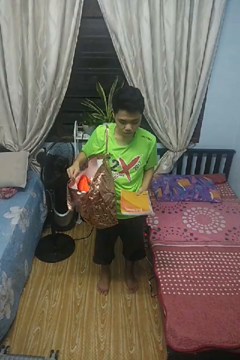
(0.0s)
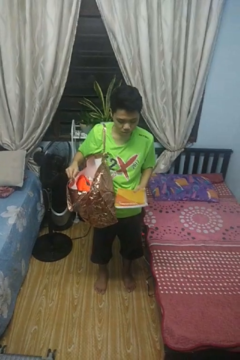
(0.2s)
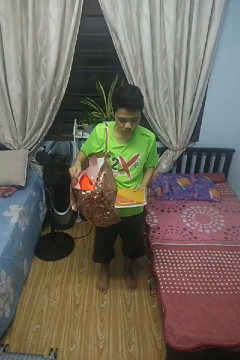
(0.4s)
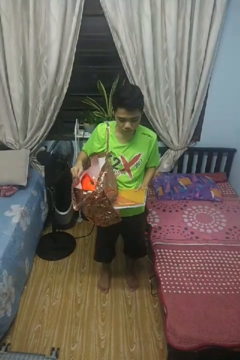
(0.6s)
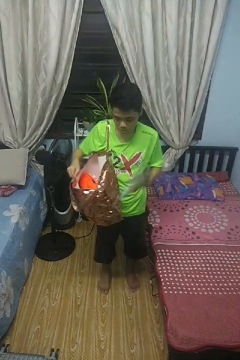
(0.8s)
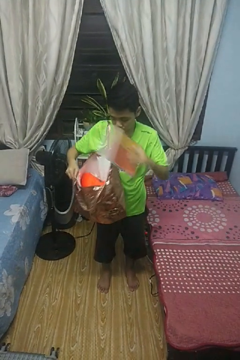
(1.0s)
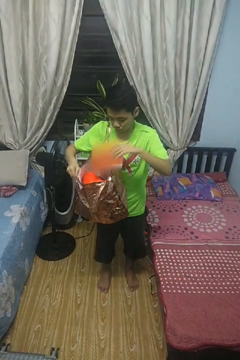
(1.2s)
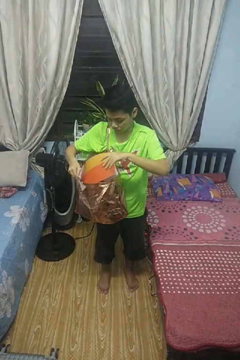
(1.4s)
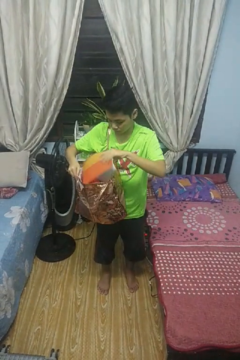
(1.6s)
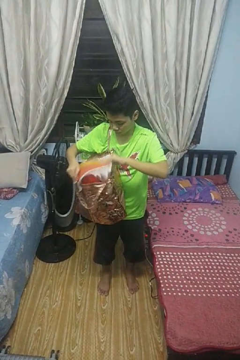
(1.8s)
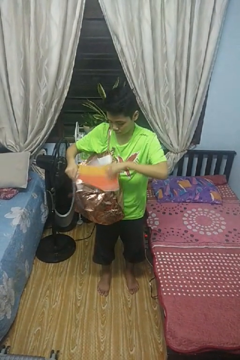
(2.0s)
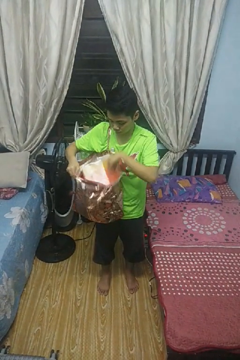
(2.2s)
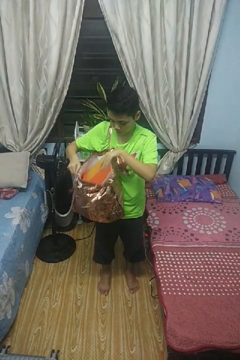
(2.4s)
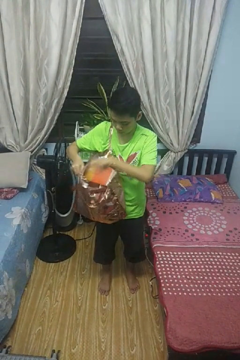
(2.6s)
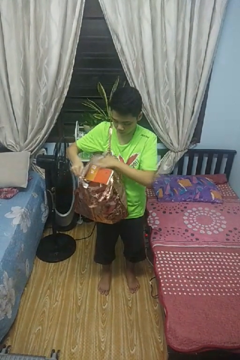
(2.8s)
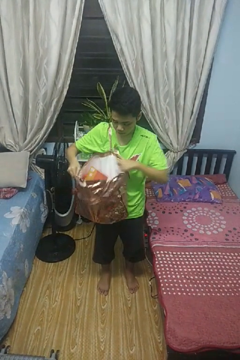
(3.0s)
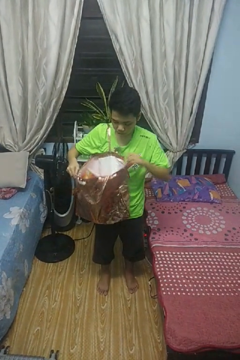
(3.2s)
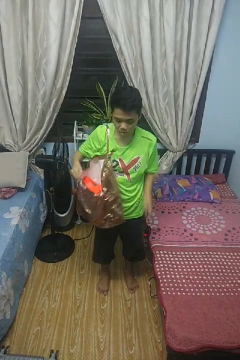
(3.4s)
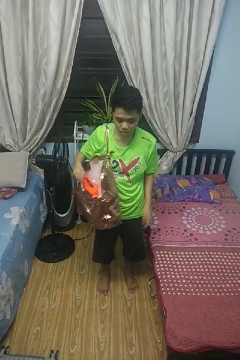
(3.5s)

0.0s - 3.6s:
person puts object into bag

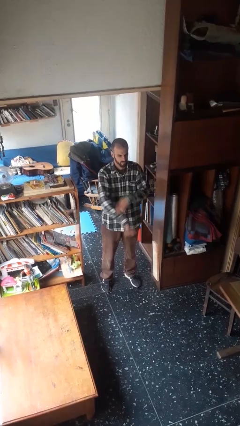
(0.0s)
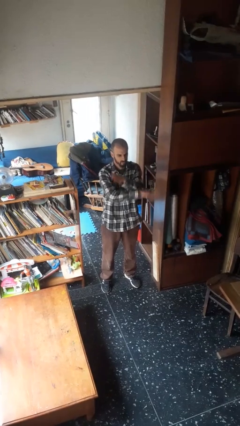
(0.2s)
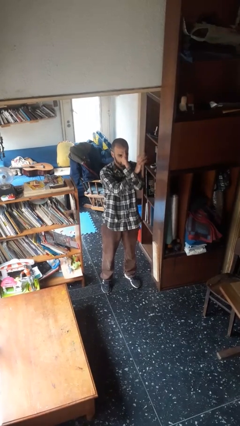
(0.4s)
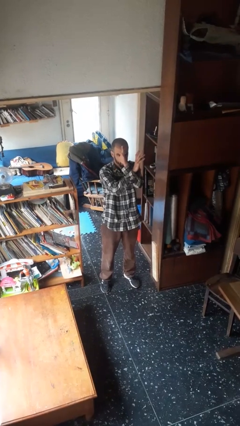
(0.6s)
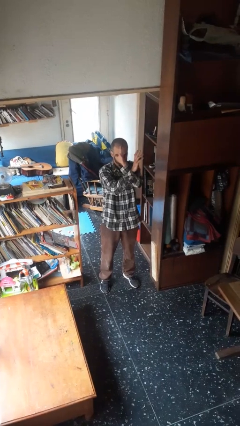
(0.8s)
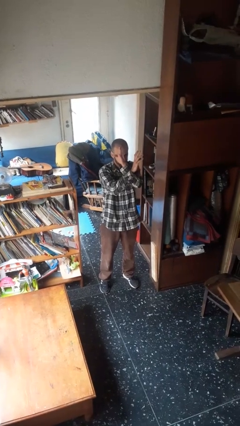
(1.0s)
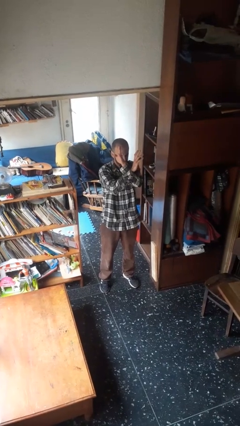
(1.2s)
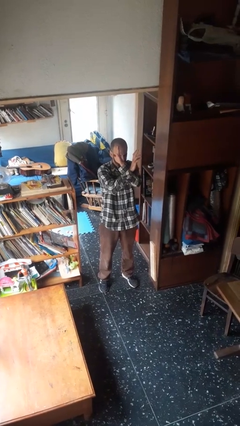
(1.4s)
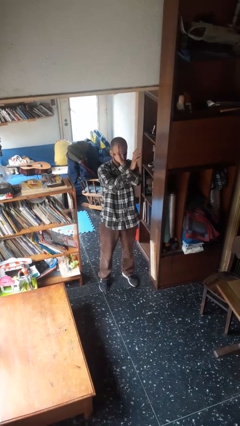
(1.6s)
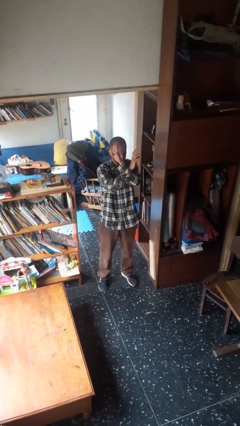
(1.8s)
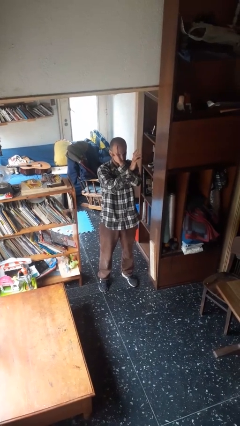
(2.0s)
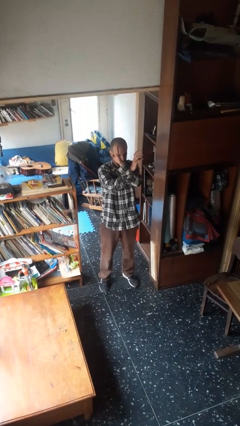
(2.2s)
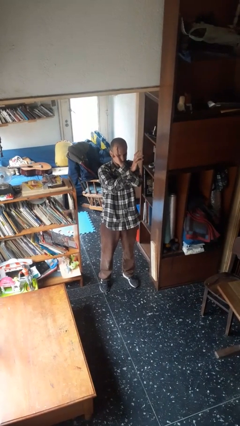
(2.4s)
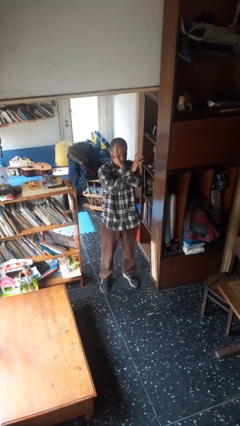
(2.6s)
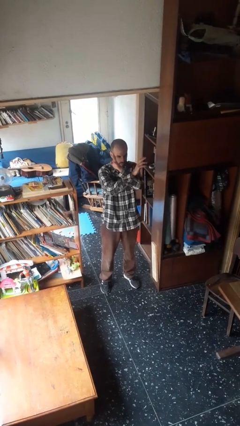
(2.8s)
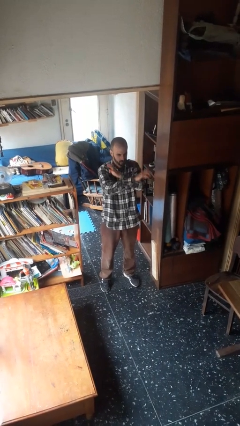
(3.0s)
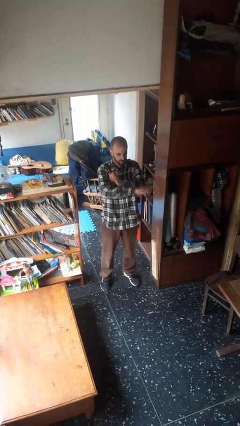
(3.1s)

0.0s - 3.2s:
person gestures arms x

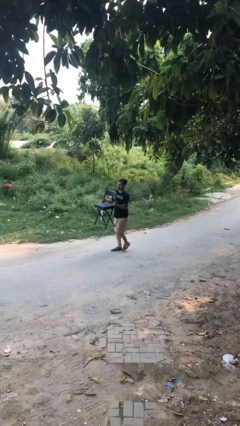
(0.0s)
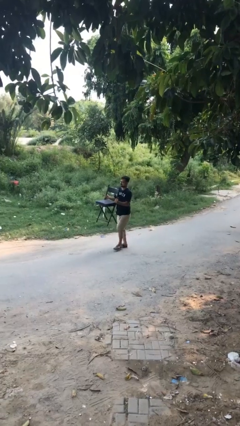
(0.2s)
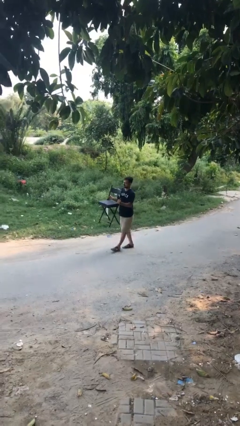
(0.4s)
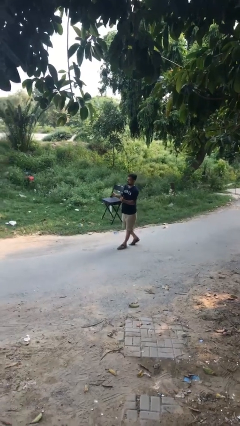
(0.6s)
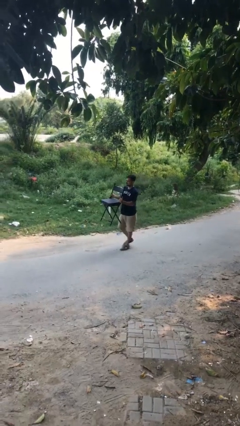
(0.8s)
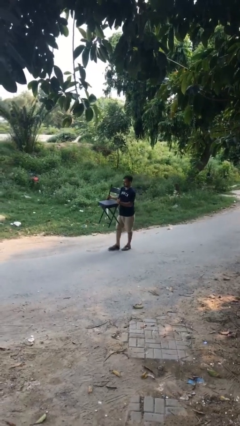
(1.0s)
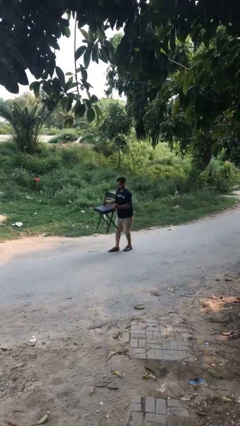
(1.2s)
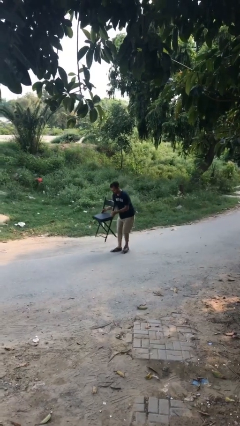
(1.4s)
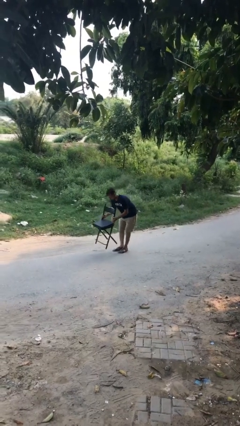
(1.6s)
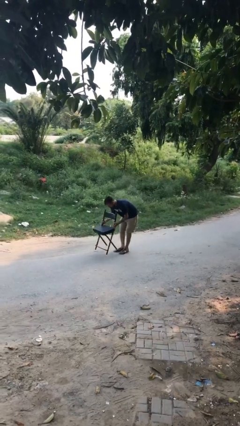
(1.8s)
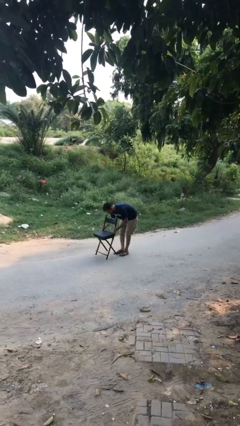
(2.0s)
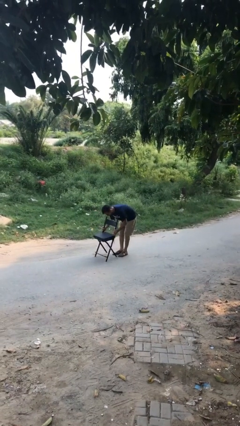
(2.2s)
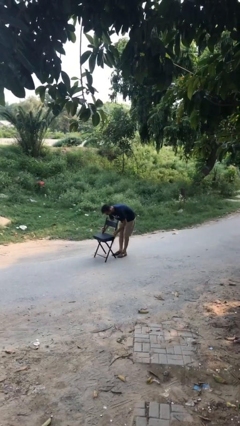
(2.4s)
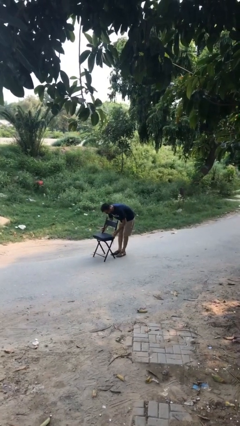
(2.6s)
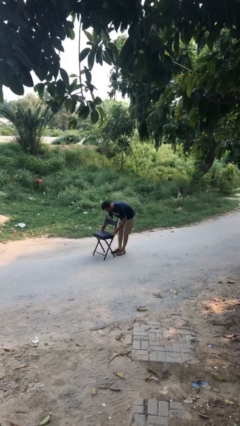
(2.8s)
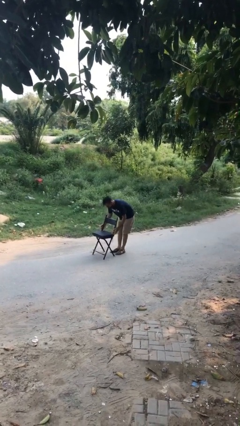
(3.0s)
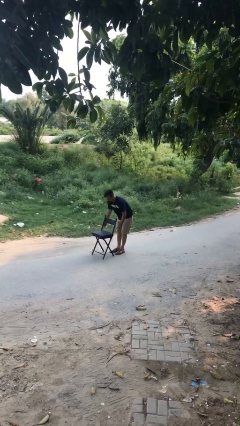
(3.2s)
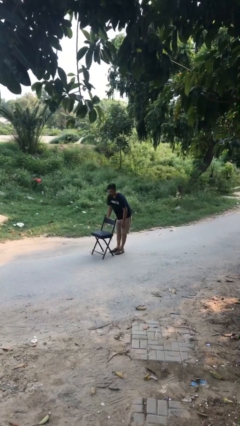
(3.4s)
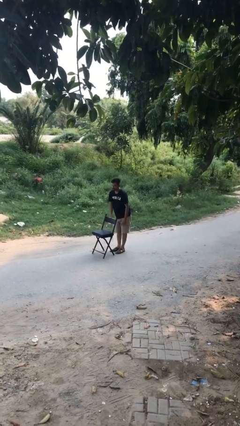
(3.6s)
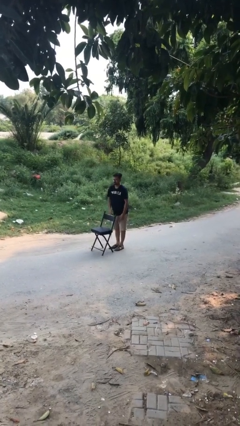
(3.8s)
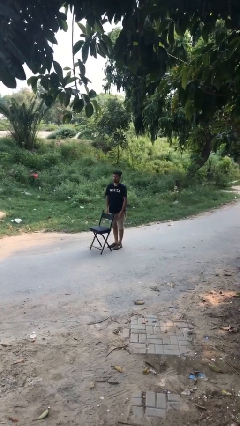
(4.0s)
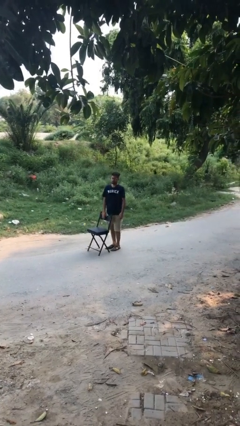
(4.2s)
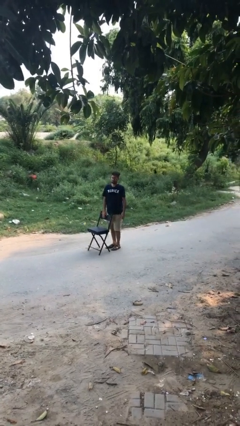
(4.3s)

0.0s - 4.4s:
person puts down object on floor

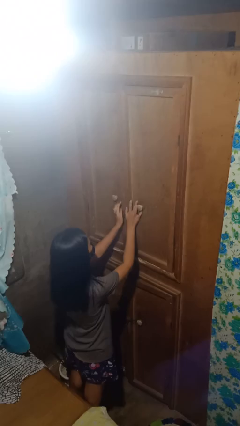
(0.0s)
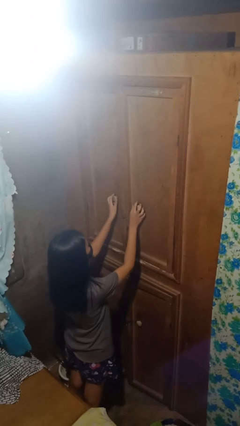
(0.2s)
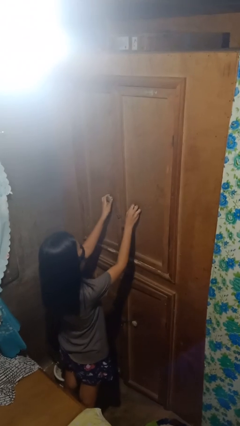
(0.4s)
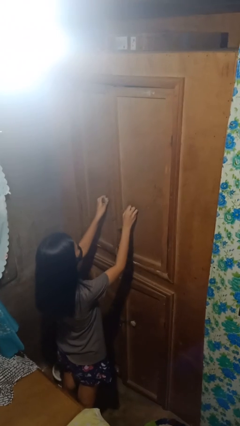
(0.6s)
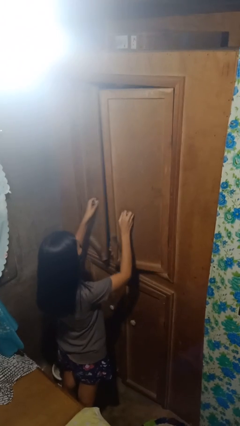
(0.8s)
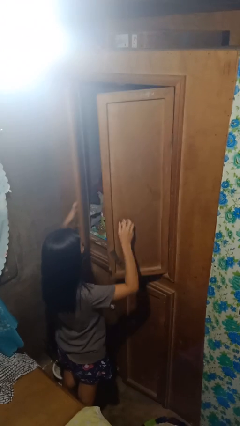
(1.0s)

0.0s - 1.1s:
person opens closet door

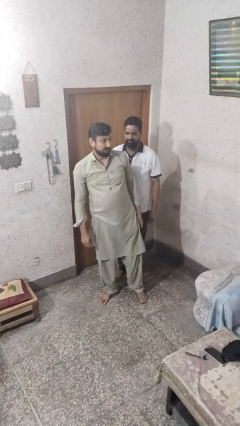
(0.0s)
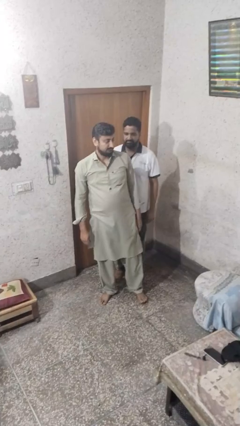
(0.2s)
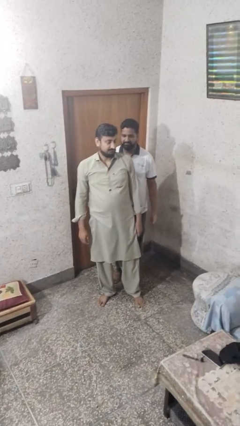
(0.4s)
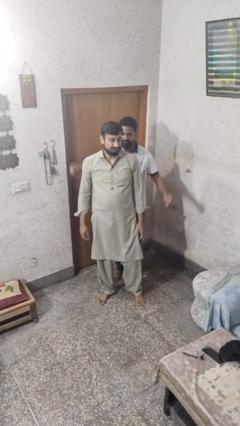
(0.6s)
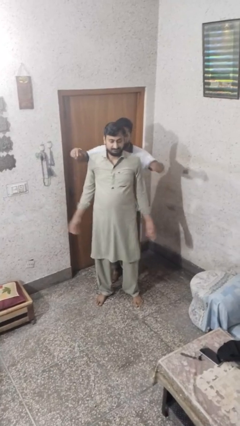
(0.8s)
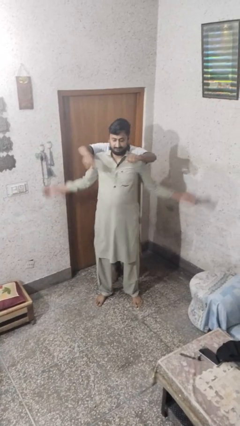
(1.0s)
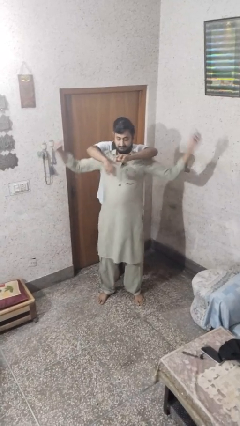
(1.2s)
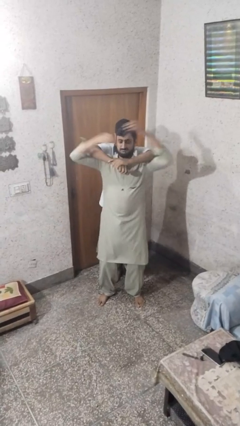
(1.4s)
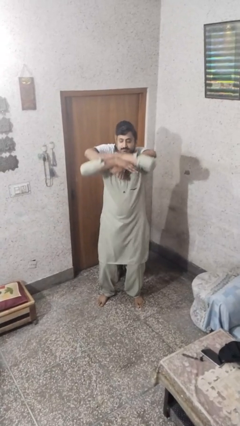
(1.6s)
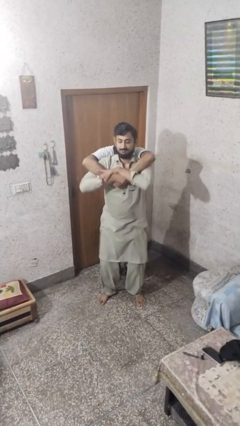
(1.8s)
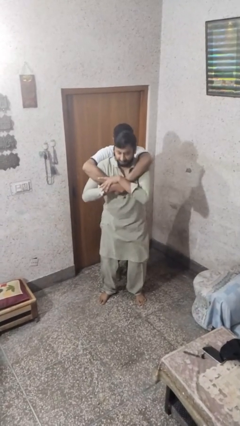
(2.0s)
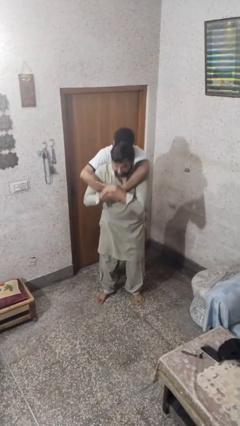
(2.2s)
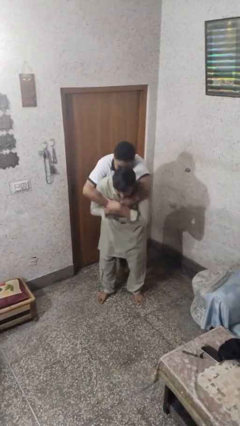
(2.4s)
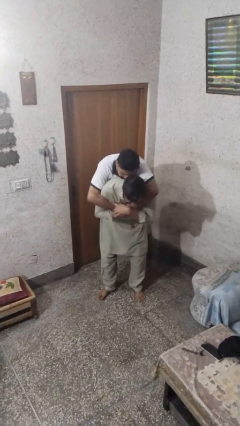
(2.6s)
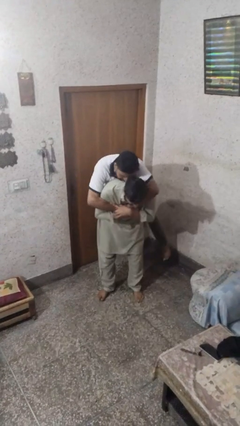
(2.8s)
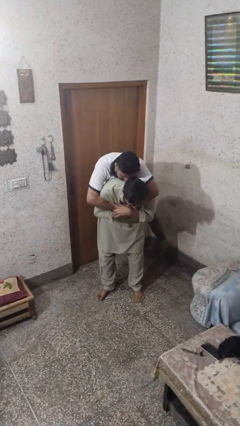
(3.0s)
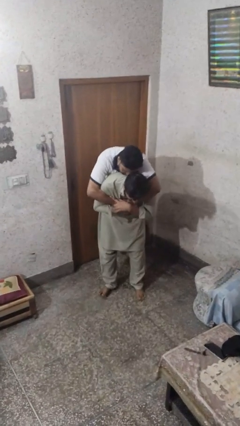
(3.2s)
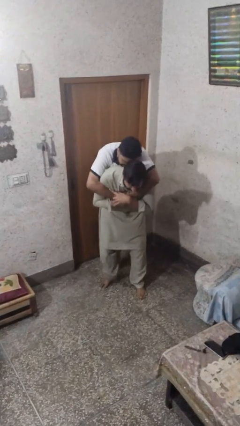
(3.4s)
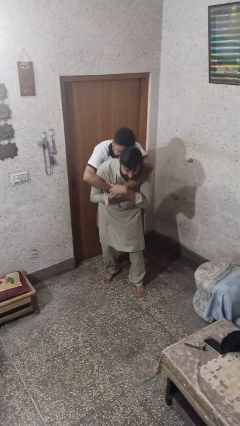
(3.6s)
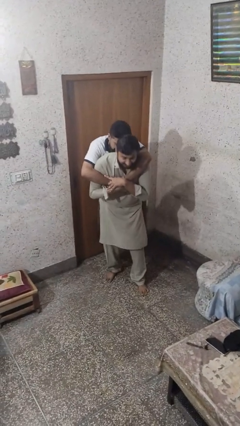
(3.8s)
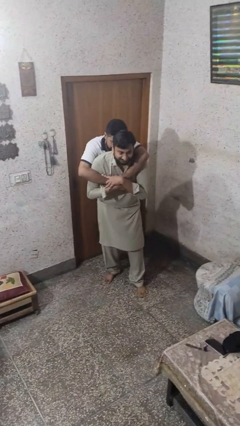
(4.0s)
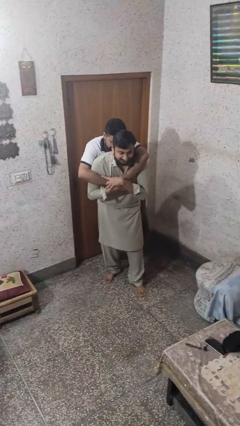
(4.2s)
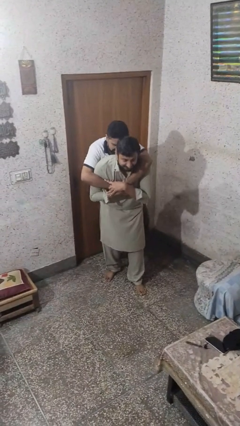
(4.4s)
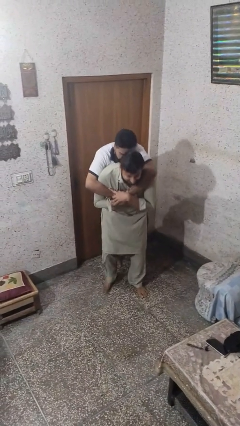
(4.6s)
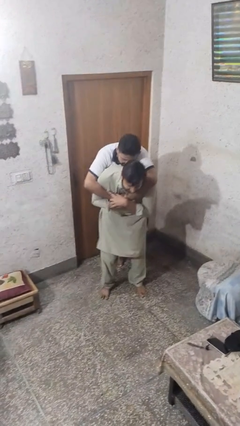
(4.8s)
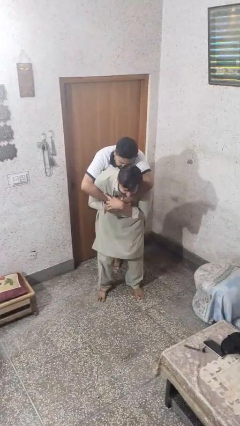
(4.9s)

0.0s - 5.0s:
person carries person on back

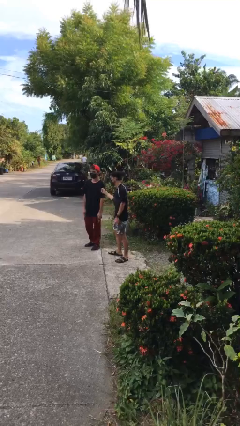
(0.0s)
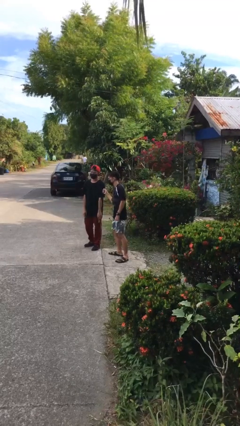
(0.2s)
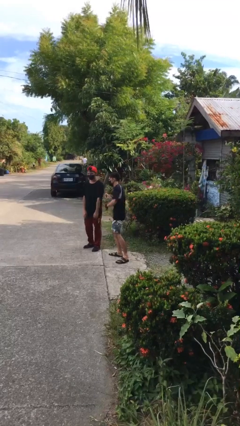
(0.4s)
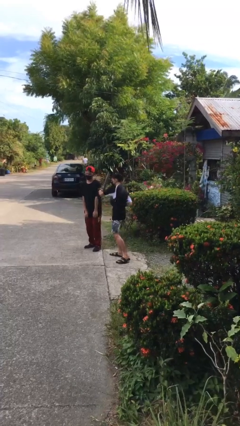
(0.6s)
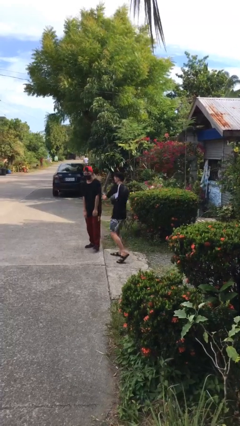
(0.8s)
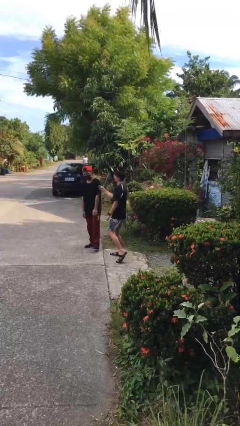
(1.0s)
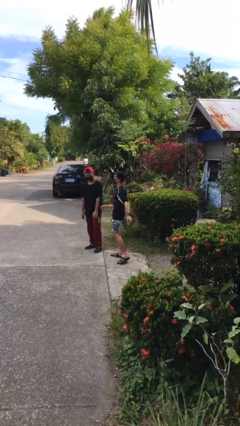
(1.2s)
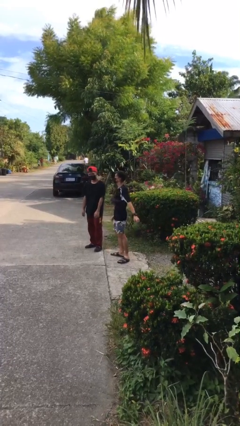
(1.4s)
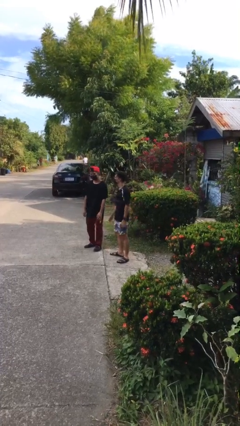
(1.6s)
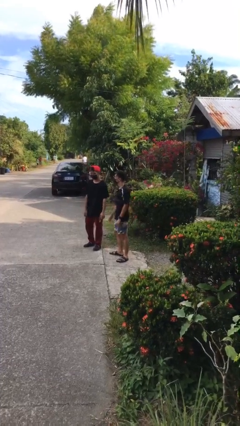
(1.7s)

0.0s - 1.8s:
person pounds shoulders of person
